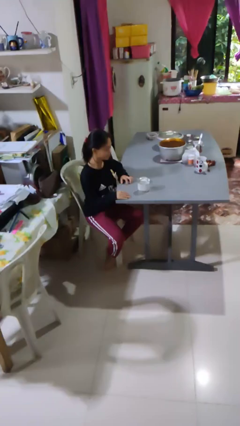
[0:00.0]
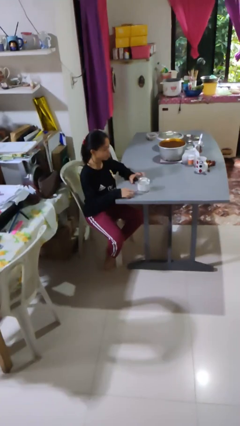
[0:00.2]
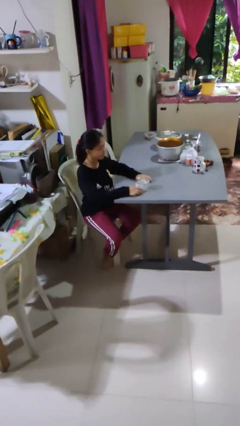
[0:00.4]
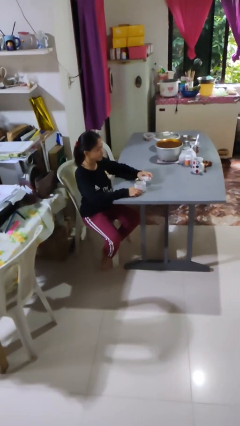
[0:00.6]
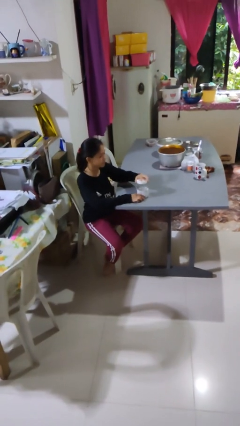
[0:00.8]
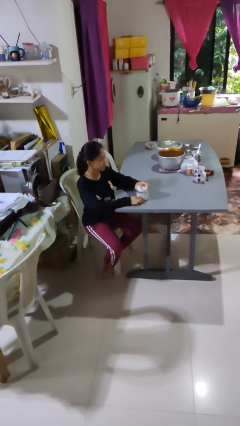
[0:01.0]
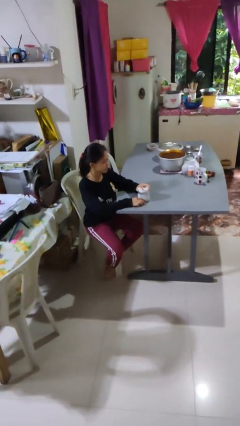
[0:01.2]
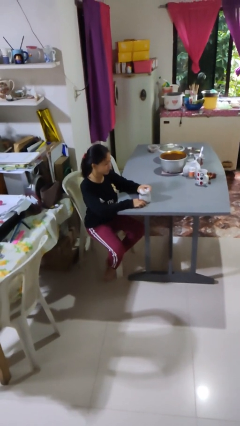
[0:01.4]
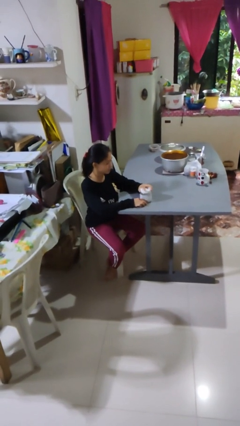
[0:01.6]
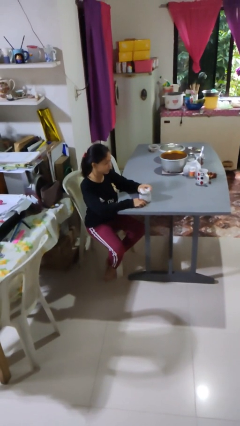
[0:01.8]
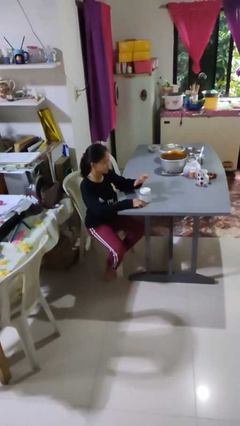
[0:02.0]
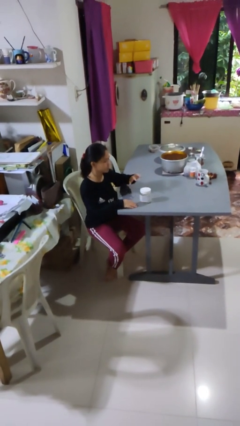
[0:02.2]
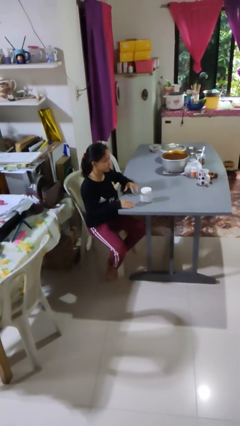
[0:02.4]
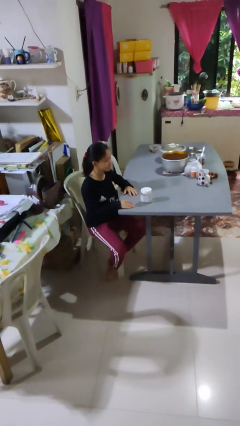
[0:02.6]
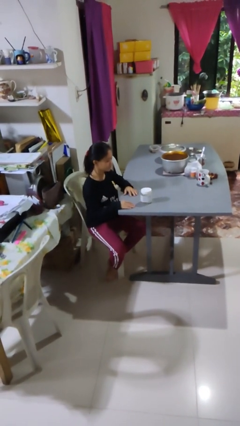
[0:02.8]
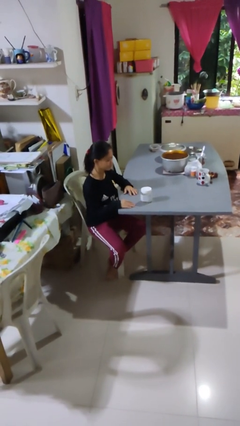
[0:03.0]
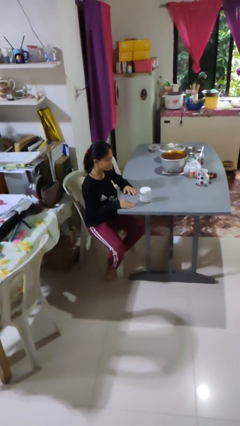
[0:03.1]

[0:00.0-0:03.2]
person closes jar

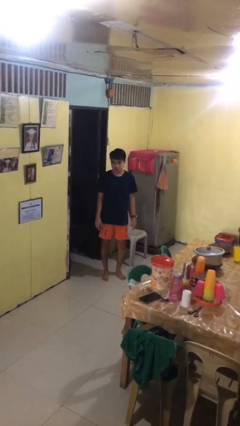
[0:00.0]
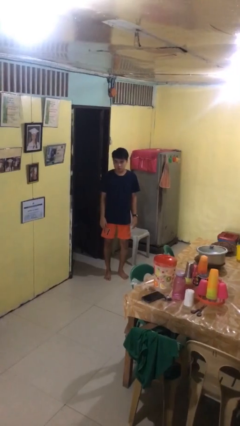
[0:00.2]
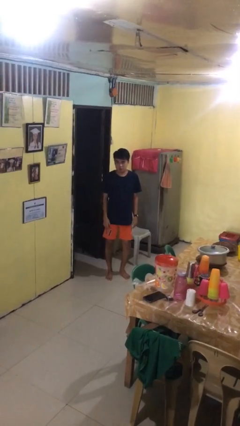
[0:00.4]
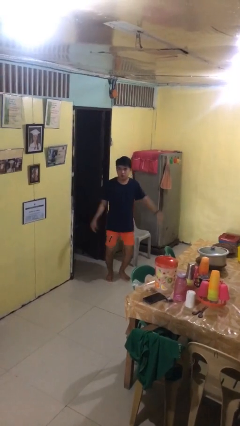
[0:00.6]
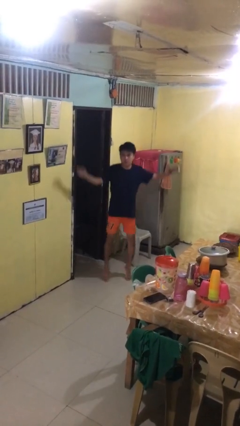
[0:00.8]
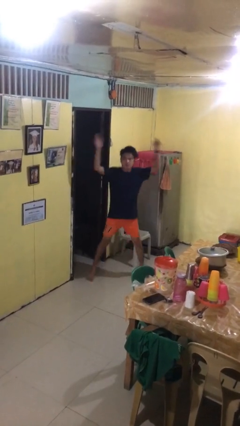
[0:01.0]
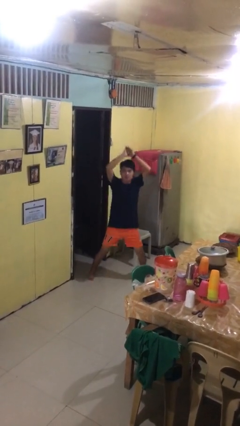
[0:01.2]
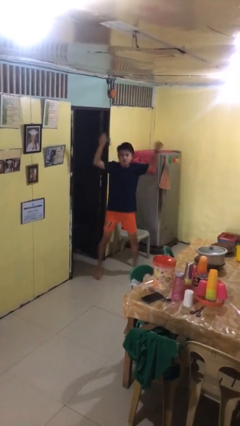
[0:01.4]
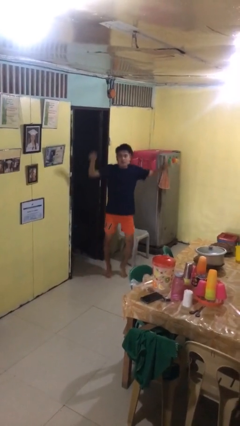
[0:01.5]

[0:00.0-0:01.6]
person exercises with jumping jacks

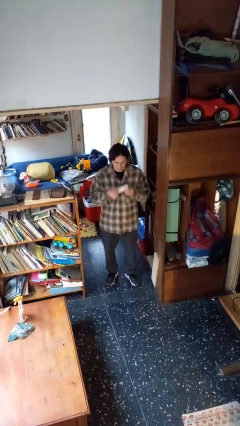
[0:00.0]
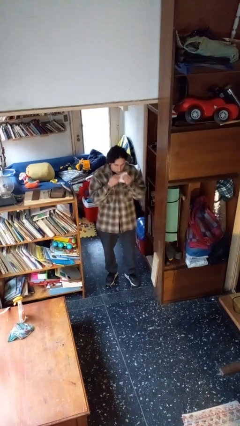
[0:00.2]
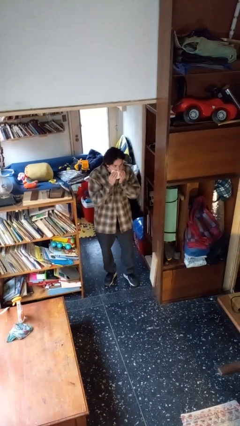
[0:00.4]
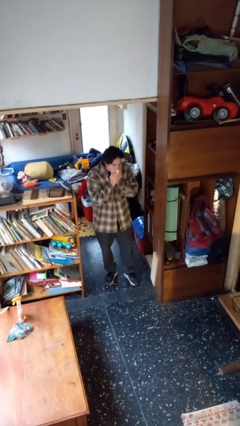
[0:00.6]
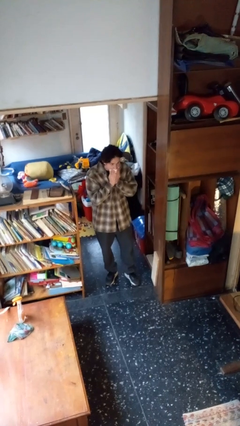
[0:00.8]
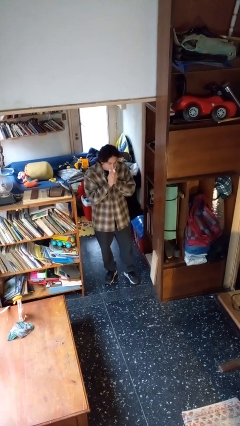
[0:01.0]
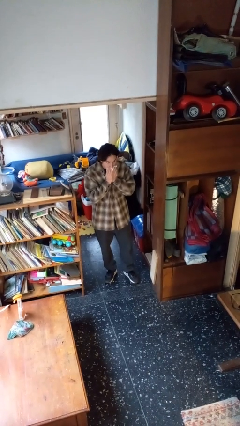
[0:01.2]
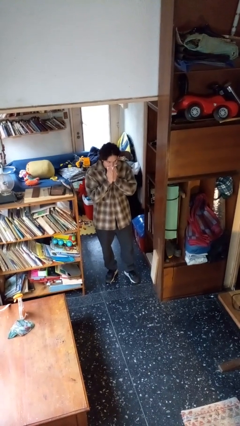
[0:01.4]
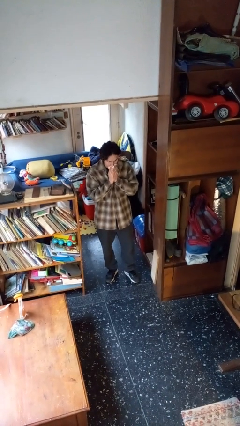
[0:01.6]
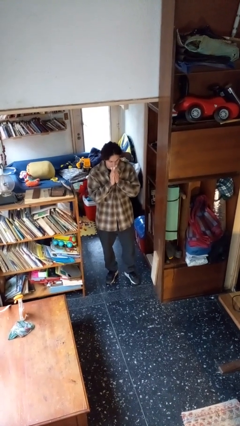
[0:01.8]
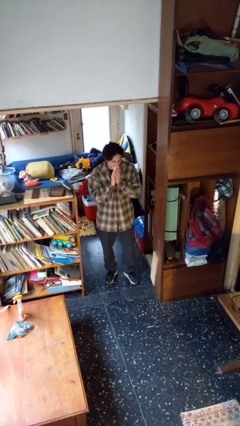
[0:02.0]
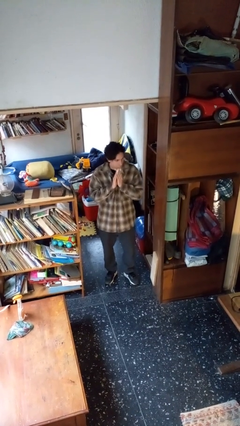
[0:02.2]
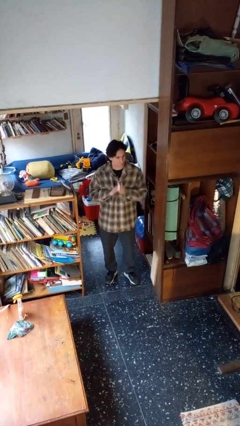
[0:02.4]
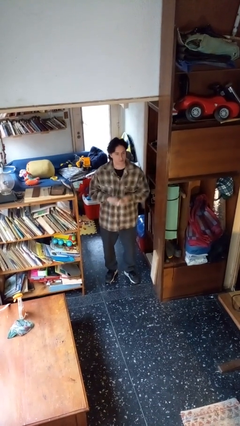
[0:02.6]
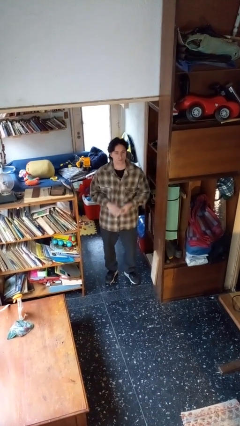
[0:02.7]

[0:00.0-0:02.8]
person wipes mouth with napkin

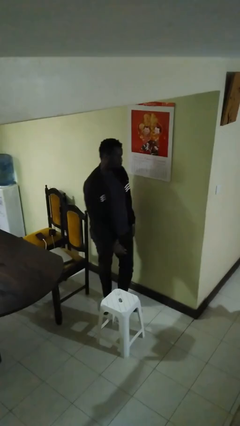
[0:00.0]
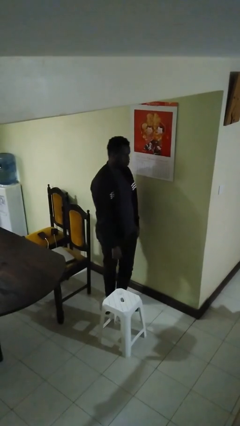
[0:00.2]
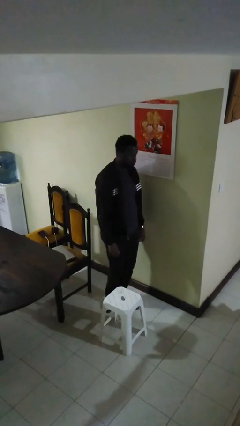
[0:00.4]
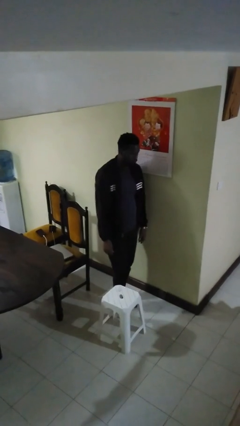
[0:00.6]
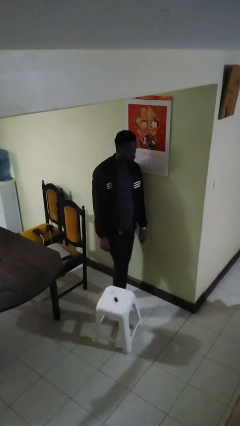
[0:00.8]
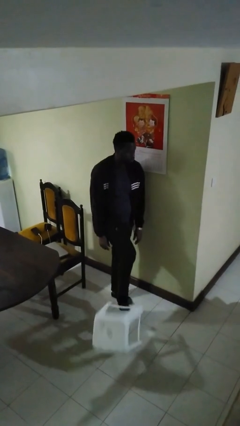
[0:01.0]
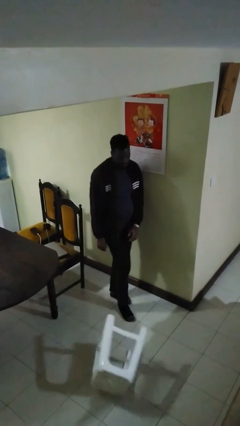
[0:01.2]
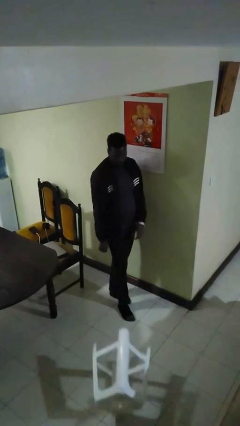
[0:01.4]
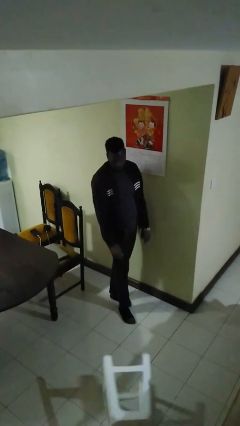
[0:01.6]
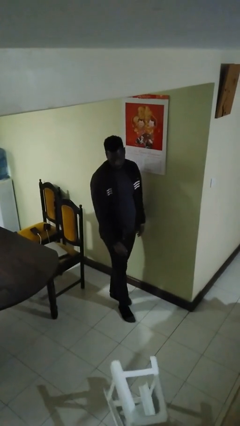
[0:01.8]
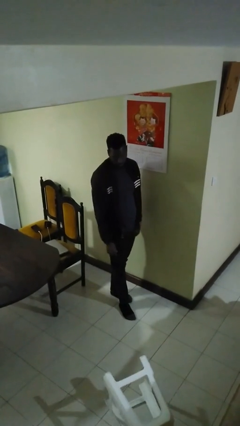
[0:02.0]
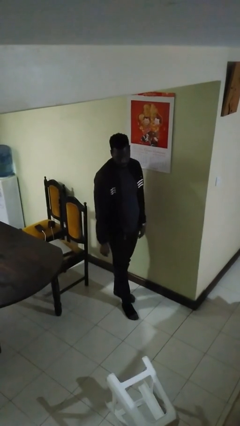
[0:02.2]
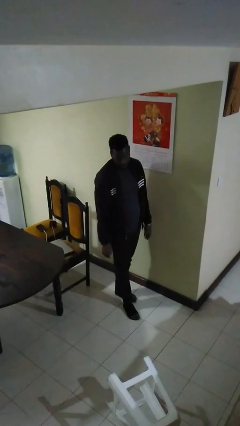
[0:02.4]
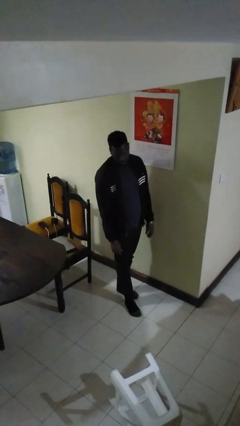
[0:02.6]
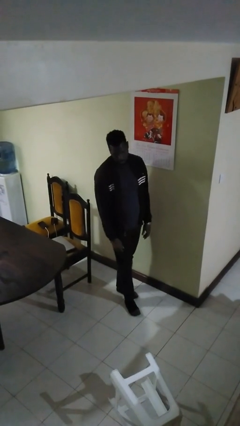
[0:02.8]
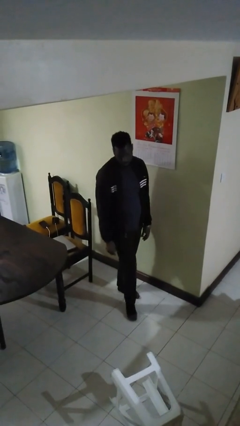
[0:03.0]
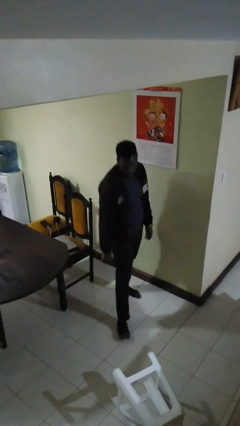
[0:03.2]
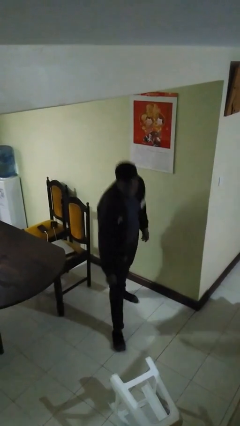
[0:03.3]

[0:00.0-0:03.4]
person knocks over furniture

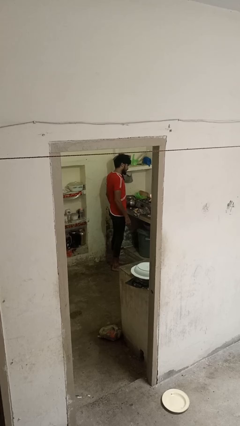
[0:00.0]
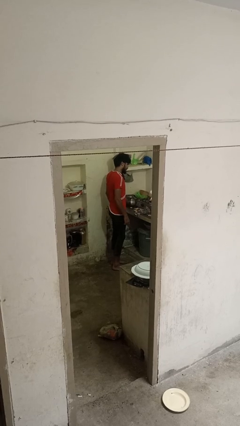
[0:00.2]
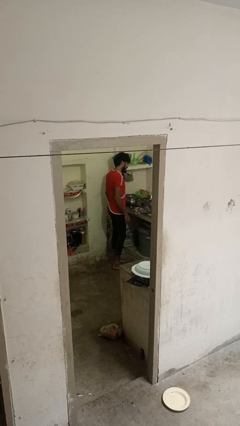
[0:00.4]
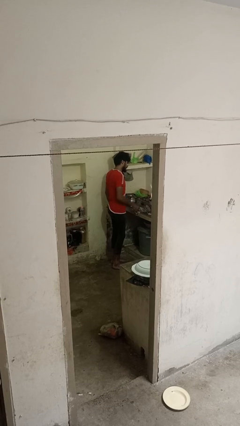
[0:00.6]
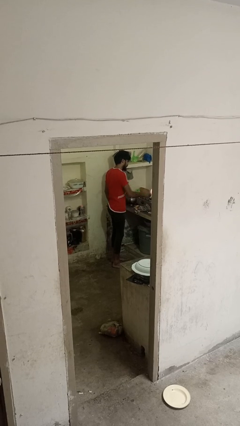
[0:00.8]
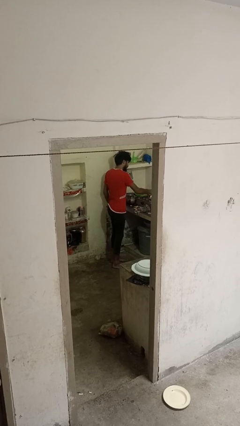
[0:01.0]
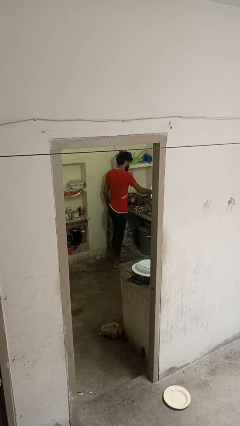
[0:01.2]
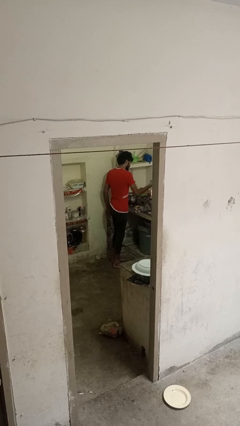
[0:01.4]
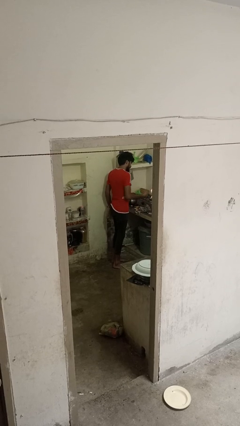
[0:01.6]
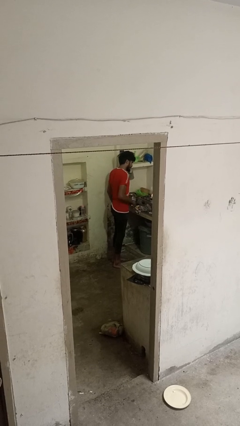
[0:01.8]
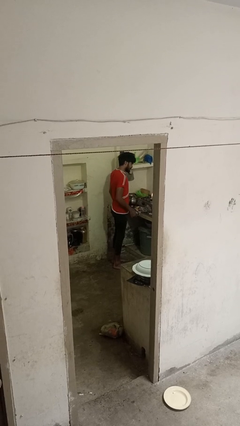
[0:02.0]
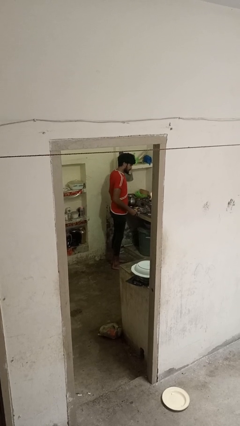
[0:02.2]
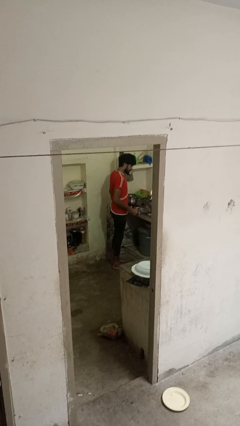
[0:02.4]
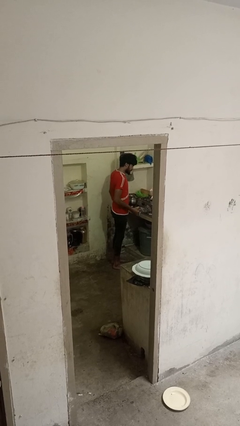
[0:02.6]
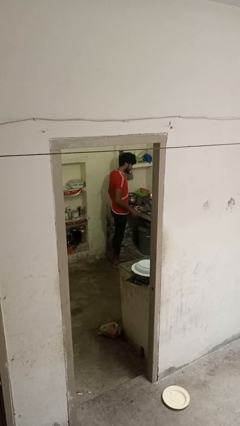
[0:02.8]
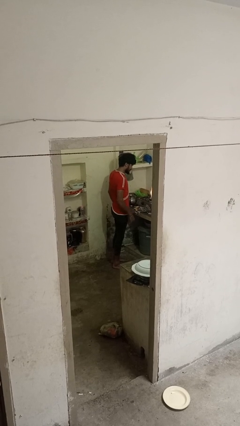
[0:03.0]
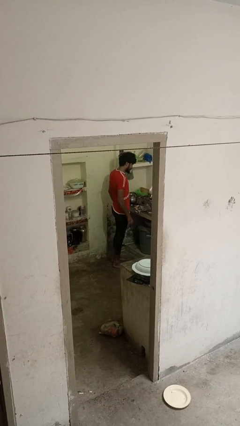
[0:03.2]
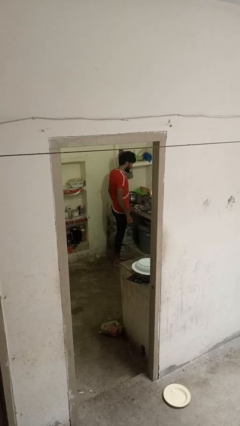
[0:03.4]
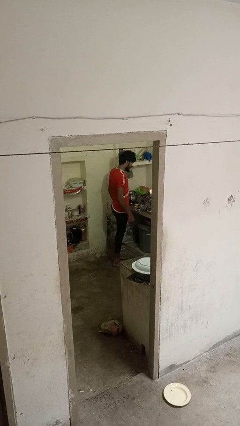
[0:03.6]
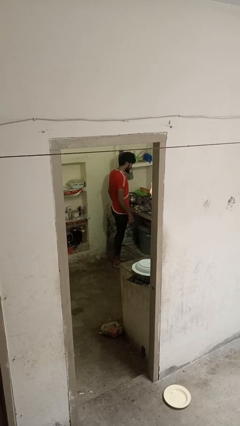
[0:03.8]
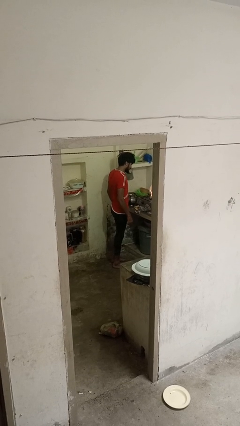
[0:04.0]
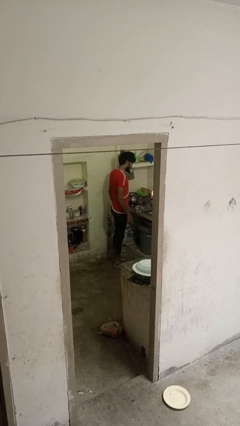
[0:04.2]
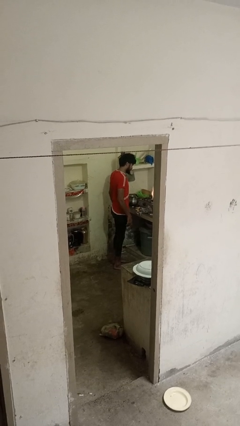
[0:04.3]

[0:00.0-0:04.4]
person burns hand

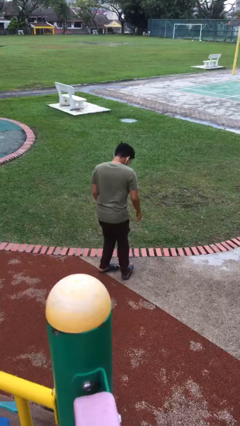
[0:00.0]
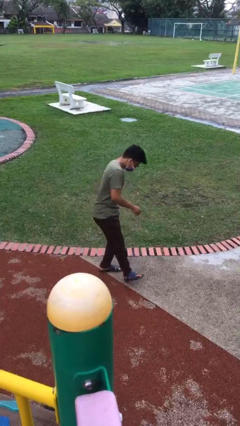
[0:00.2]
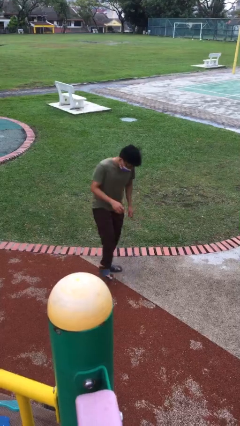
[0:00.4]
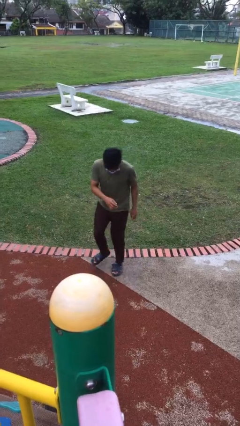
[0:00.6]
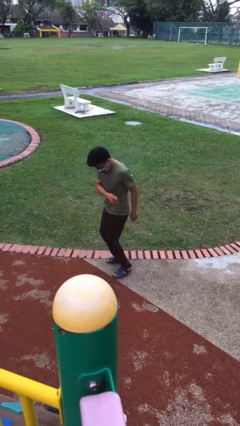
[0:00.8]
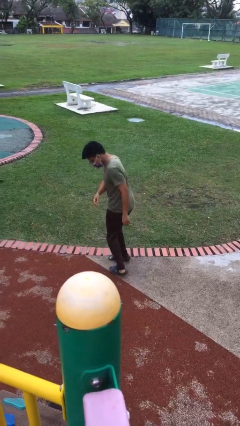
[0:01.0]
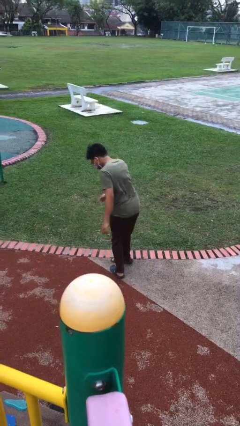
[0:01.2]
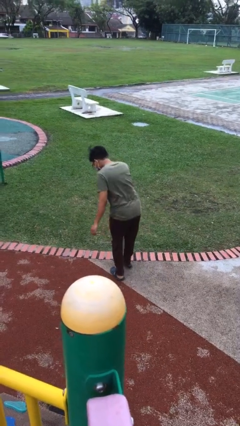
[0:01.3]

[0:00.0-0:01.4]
person twirls

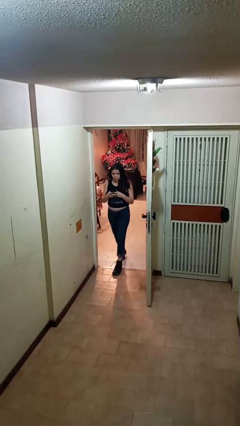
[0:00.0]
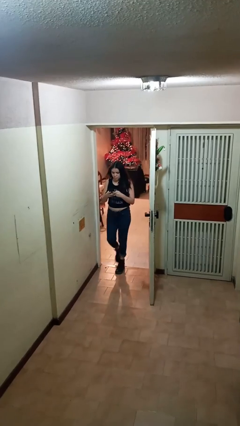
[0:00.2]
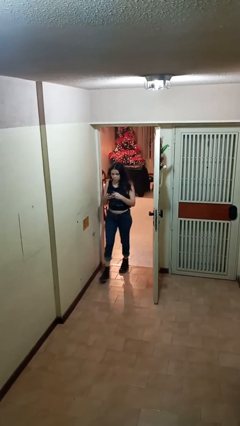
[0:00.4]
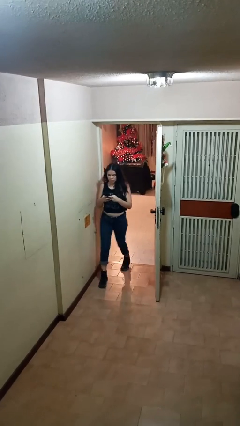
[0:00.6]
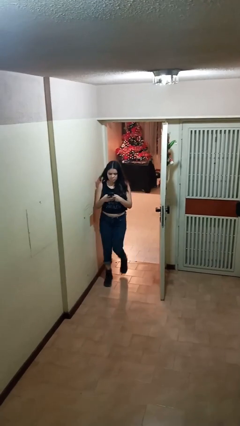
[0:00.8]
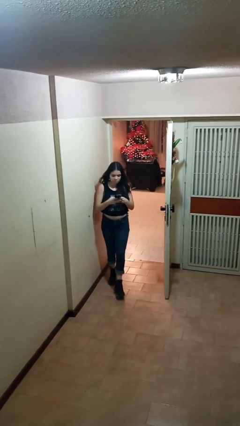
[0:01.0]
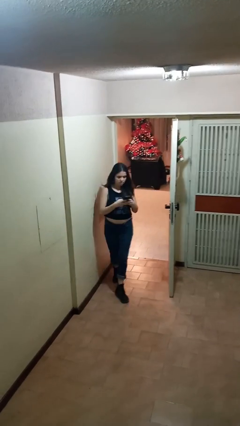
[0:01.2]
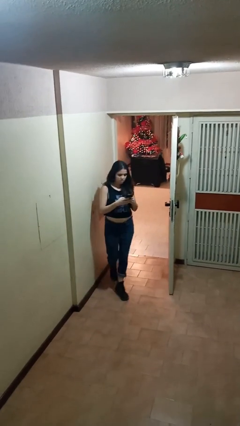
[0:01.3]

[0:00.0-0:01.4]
person enters scene through structure
